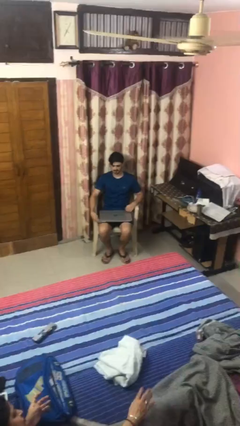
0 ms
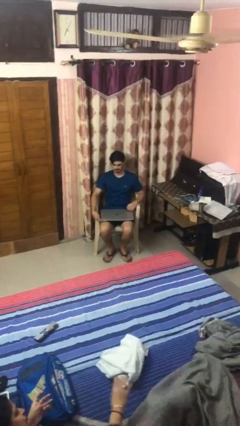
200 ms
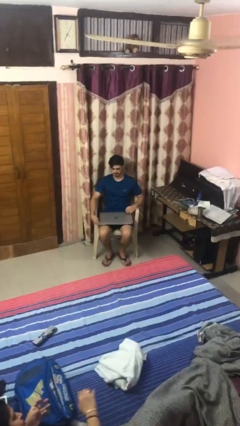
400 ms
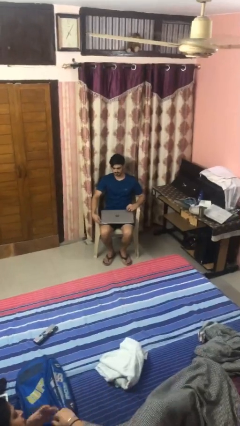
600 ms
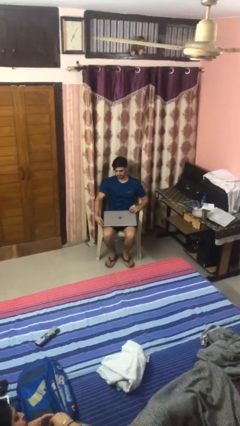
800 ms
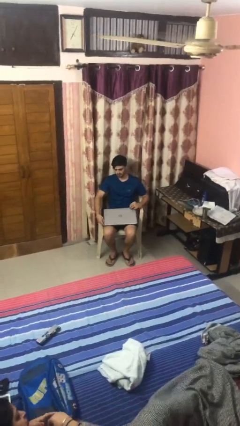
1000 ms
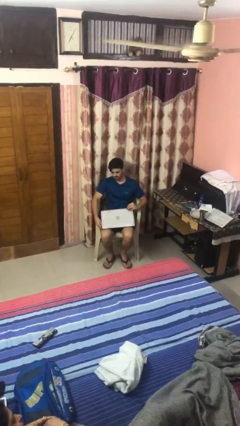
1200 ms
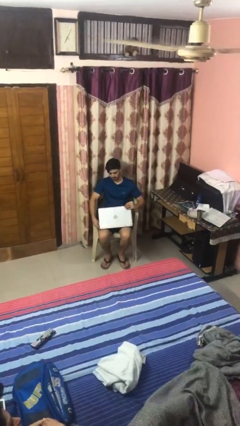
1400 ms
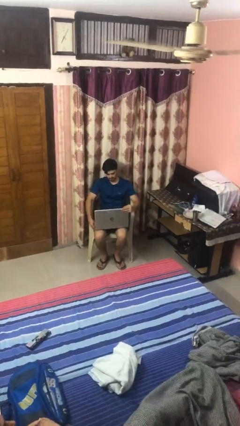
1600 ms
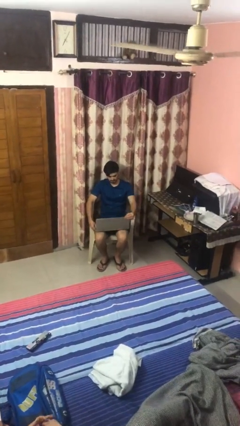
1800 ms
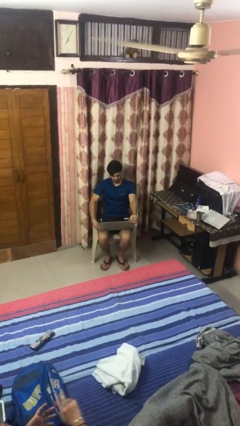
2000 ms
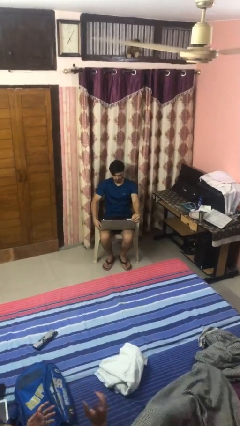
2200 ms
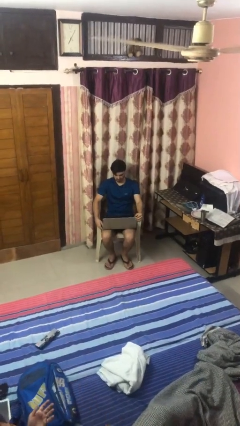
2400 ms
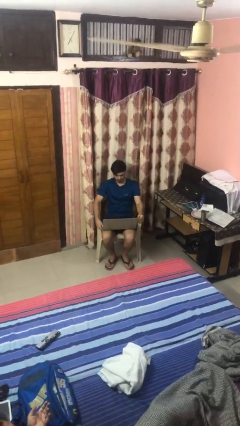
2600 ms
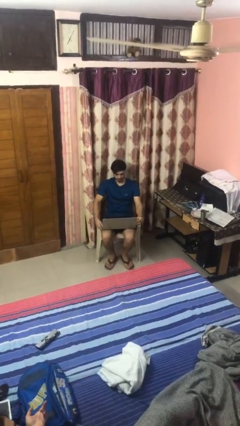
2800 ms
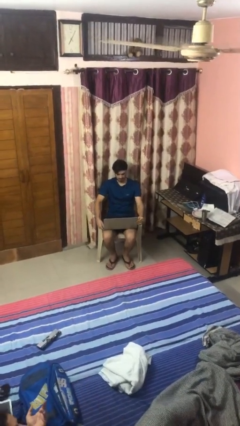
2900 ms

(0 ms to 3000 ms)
person opens laptop

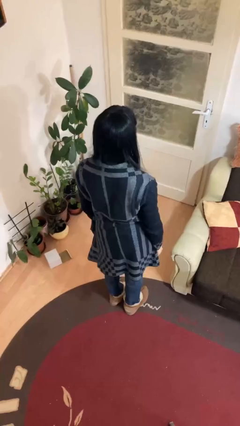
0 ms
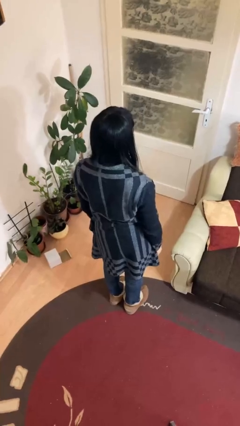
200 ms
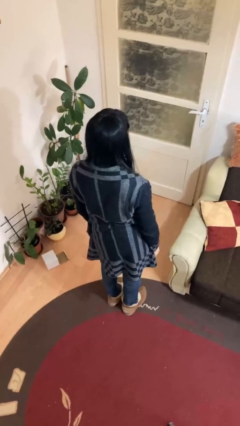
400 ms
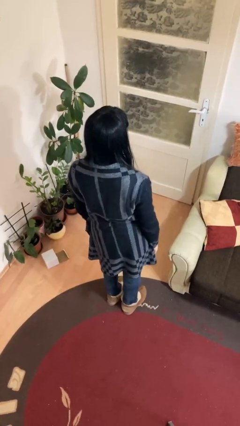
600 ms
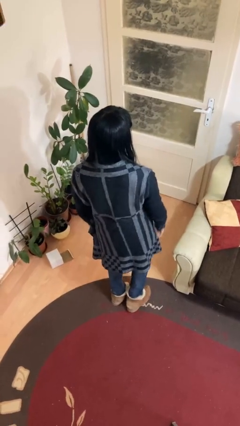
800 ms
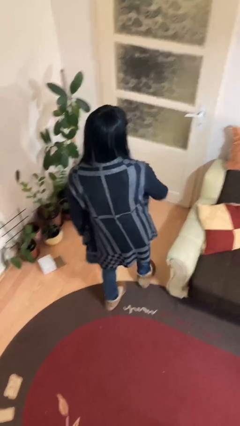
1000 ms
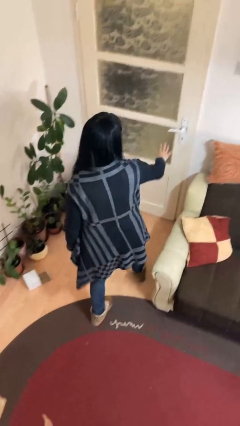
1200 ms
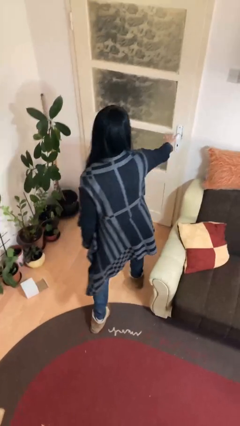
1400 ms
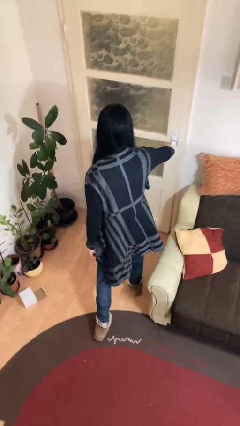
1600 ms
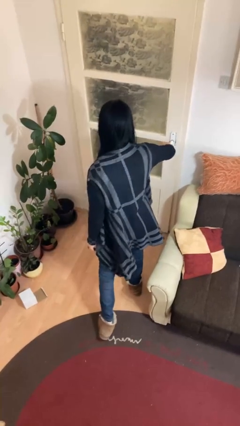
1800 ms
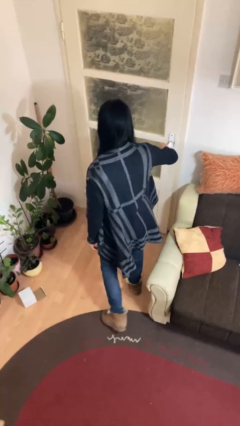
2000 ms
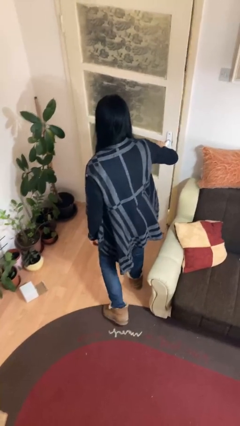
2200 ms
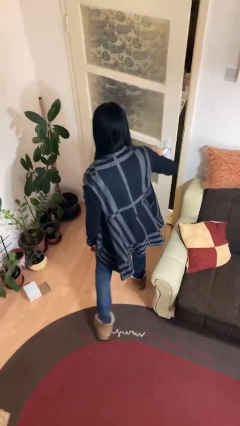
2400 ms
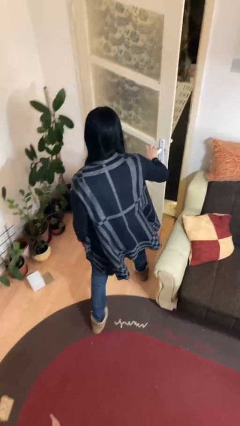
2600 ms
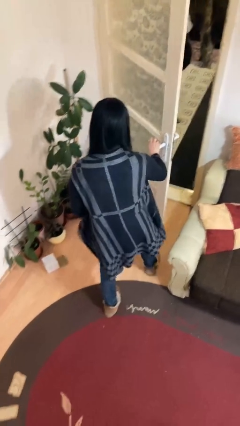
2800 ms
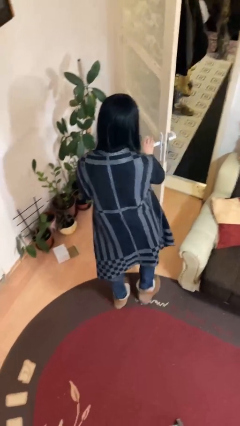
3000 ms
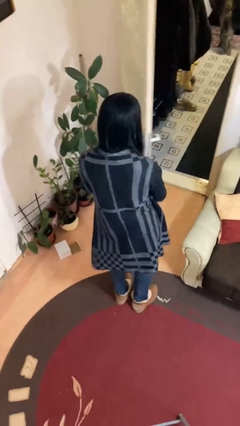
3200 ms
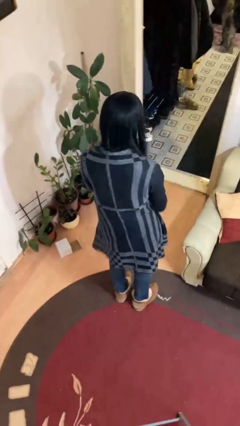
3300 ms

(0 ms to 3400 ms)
person opens facility door

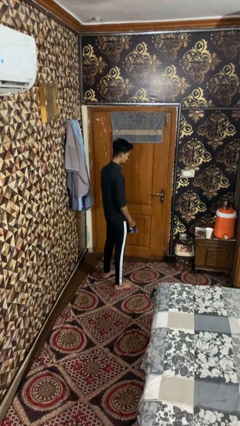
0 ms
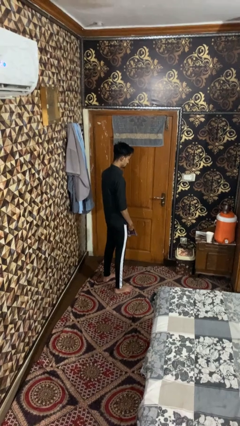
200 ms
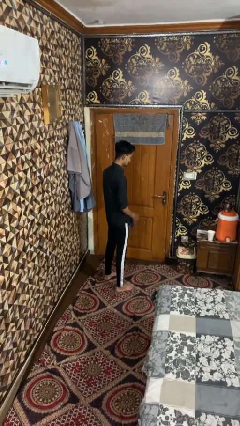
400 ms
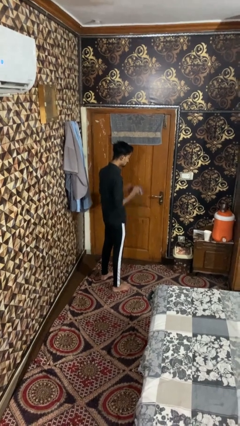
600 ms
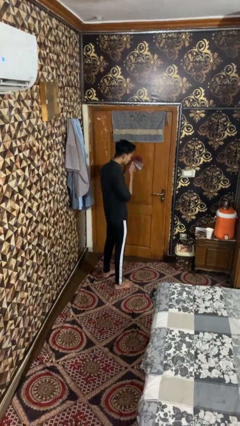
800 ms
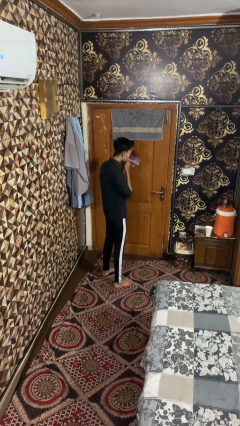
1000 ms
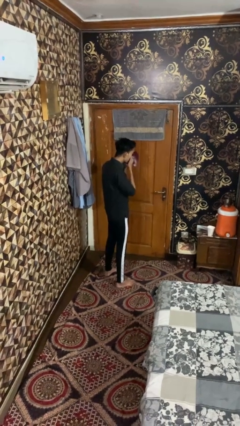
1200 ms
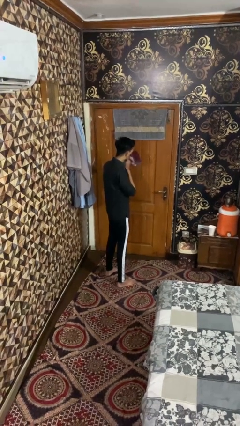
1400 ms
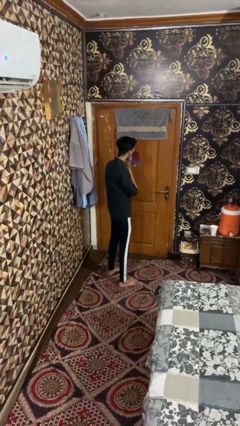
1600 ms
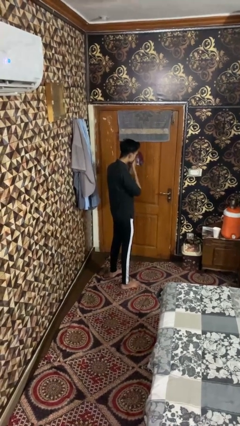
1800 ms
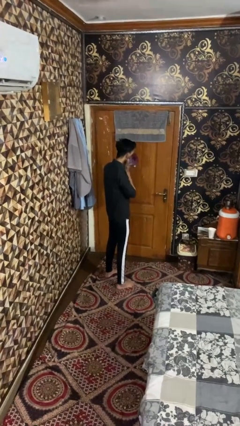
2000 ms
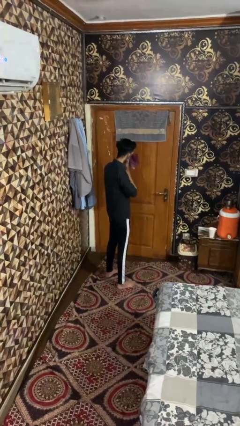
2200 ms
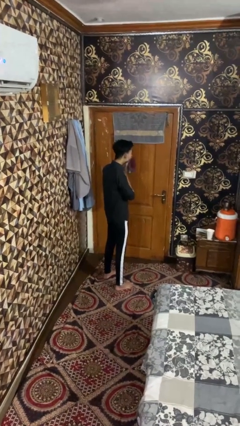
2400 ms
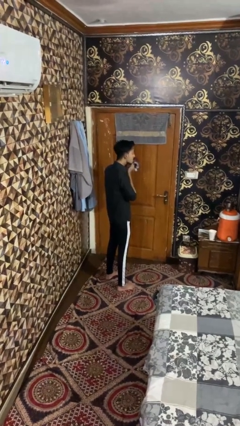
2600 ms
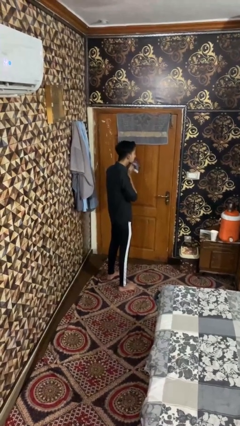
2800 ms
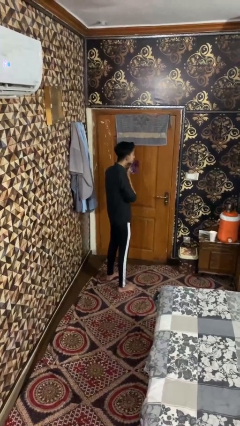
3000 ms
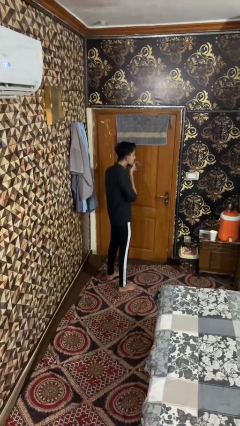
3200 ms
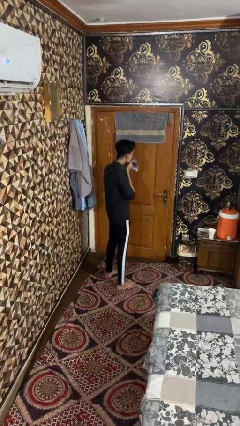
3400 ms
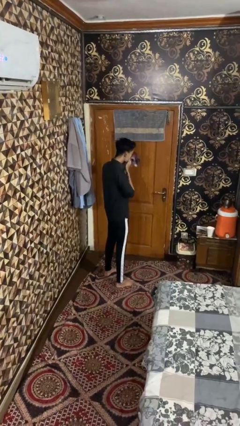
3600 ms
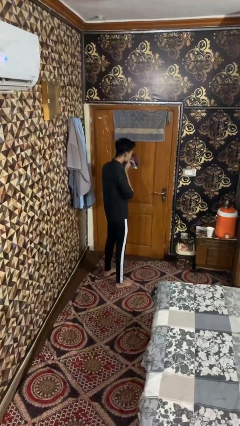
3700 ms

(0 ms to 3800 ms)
person wipes mouth with napkin

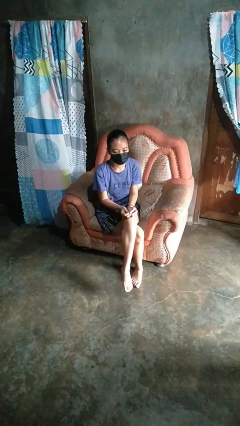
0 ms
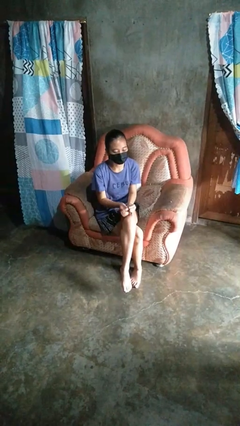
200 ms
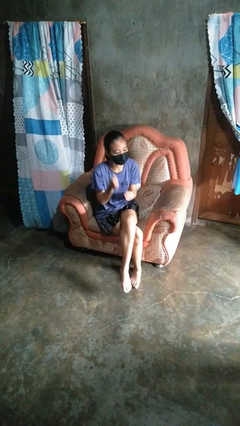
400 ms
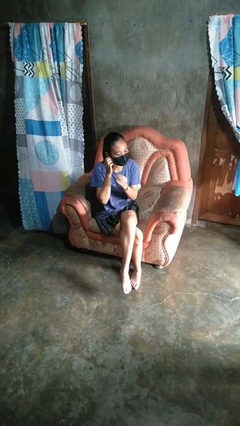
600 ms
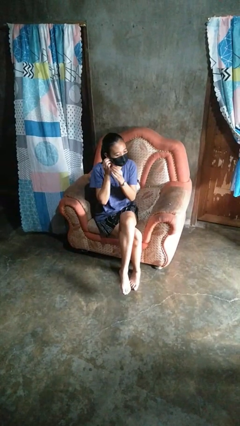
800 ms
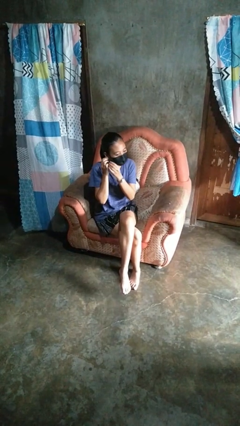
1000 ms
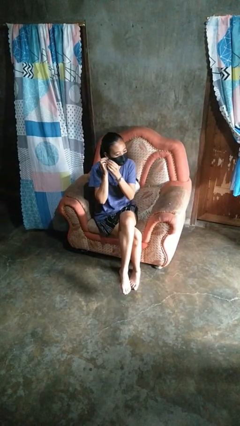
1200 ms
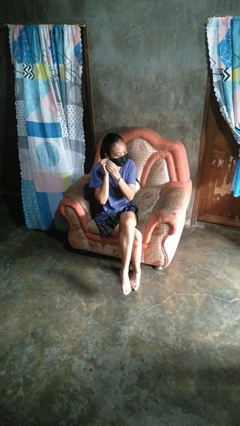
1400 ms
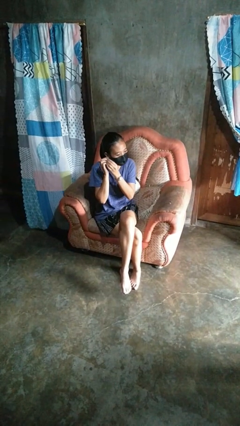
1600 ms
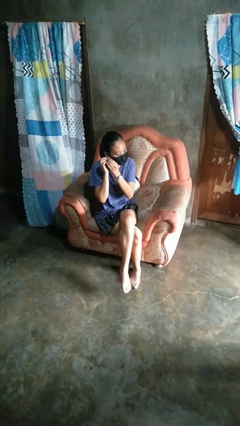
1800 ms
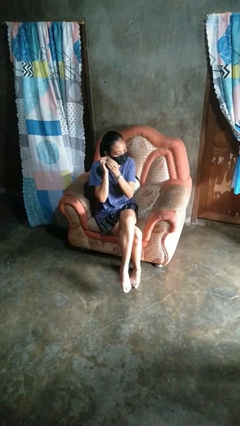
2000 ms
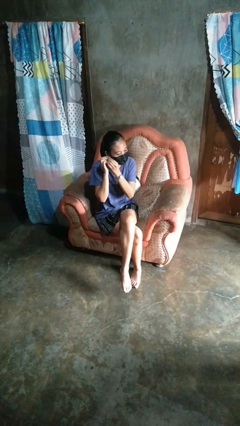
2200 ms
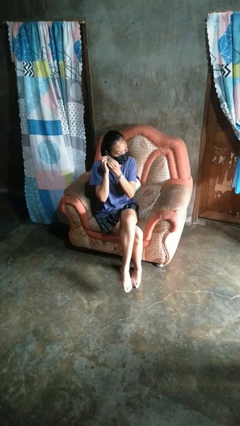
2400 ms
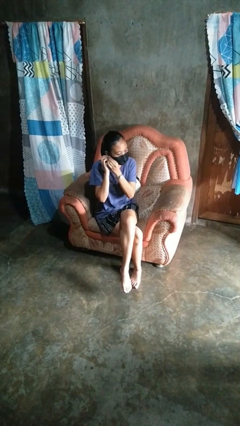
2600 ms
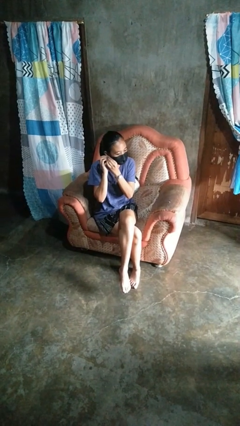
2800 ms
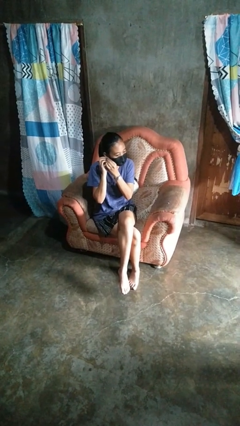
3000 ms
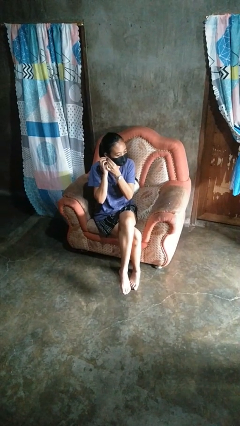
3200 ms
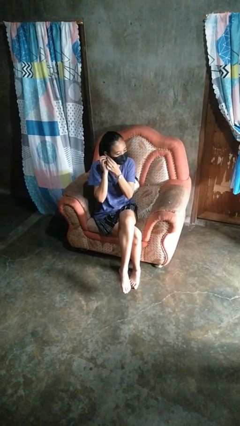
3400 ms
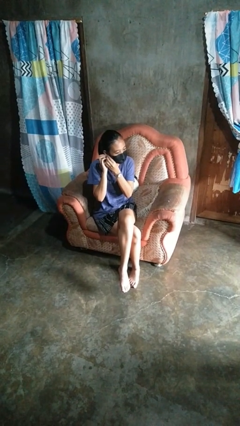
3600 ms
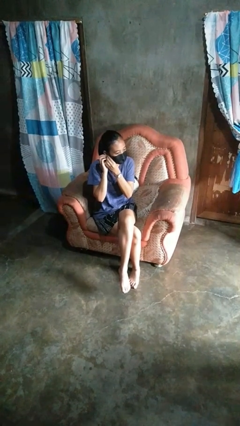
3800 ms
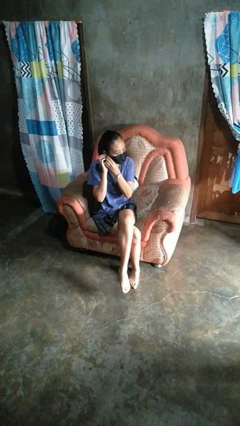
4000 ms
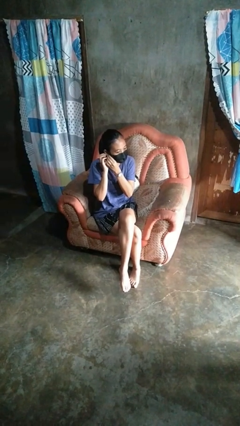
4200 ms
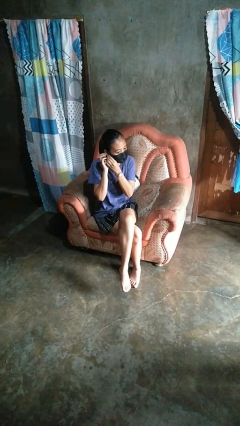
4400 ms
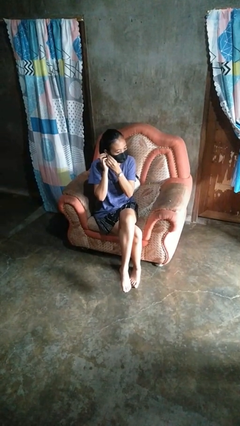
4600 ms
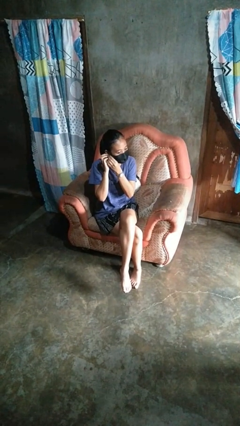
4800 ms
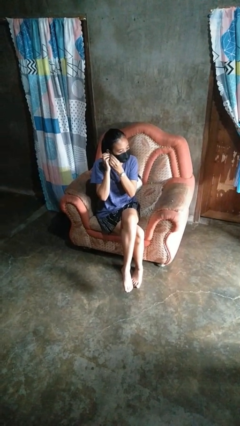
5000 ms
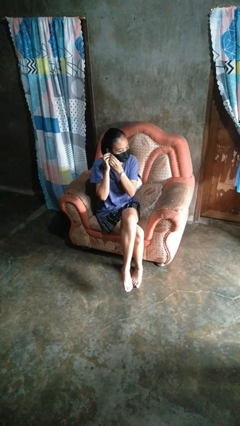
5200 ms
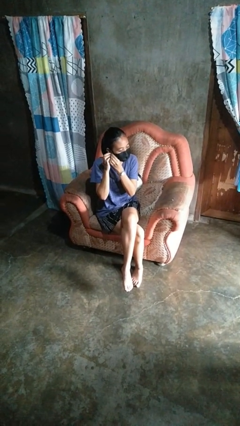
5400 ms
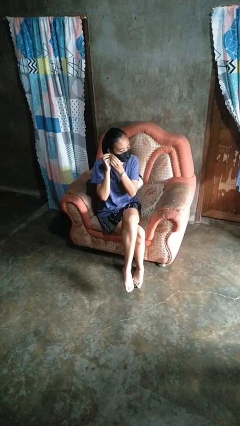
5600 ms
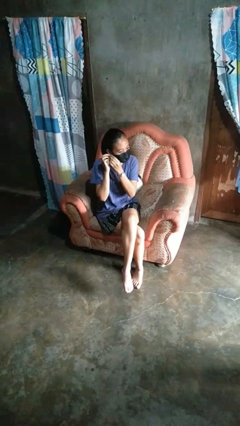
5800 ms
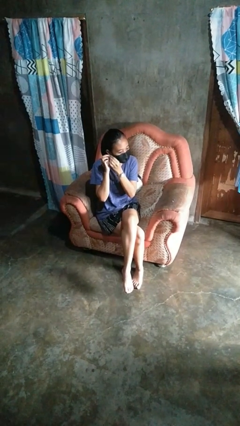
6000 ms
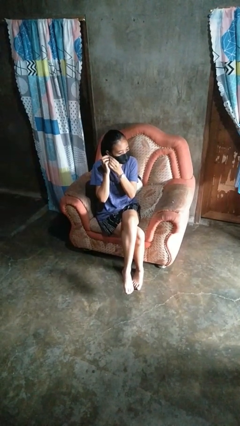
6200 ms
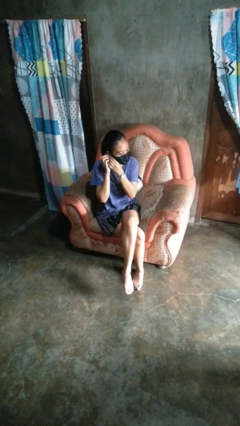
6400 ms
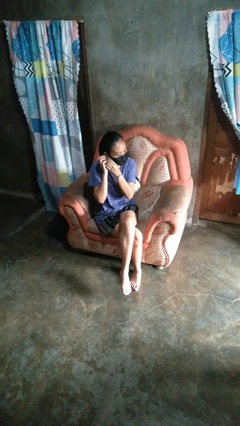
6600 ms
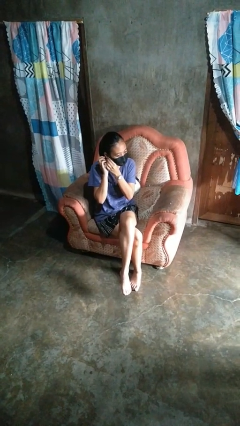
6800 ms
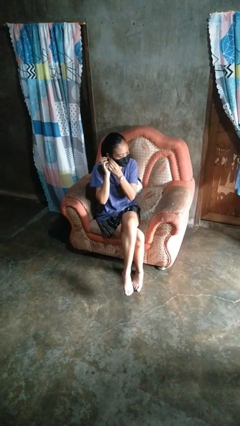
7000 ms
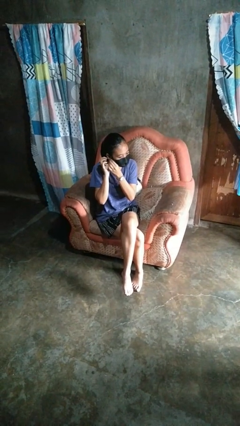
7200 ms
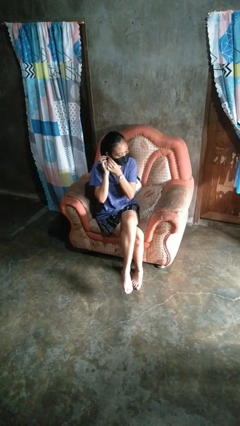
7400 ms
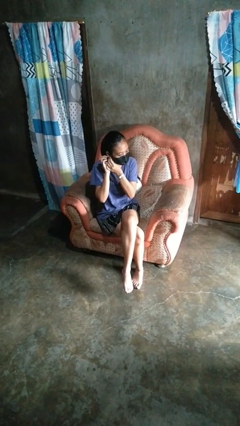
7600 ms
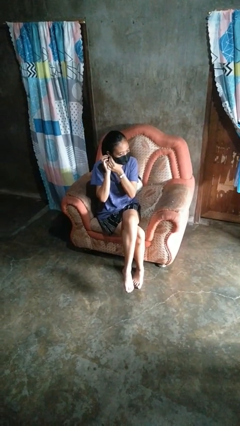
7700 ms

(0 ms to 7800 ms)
person puts on earrings
